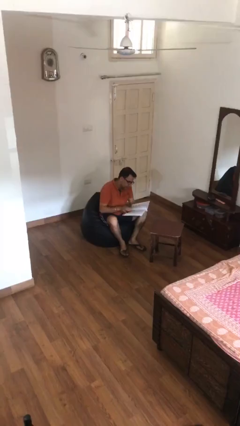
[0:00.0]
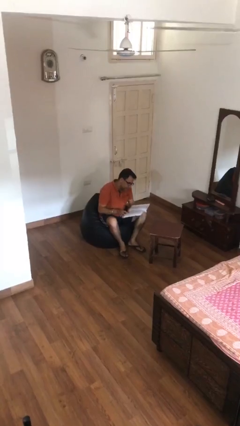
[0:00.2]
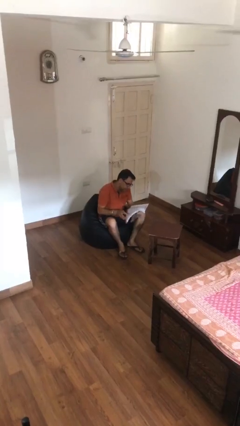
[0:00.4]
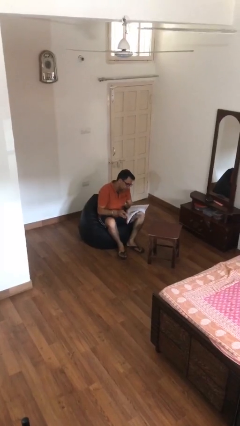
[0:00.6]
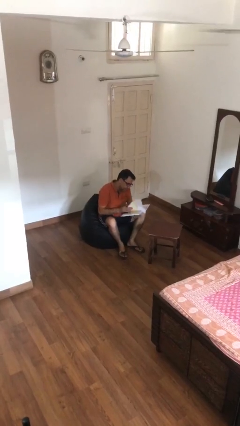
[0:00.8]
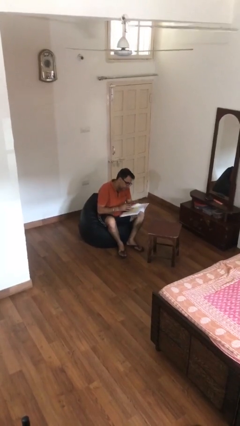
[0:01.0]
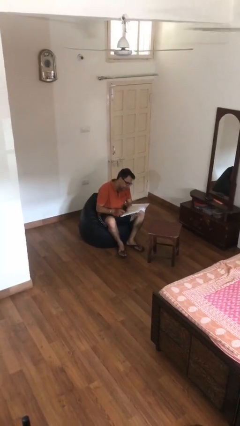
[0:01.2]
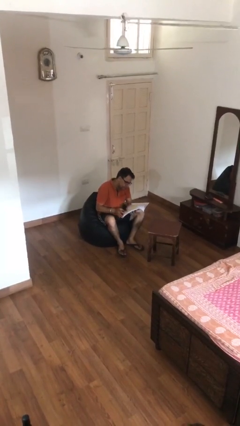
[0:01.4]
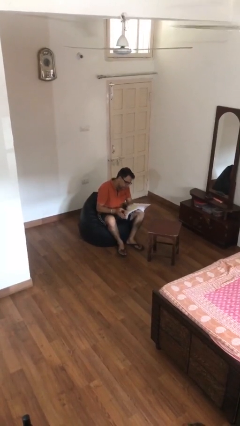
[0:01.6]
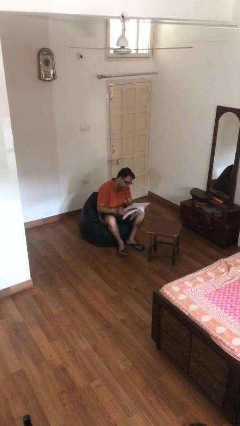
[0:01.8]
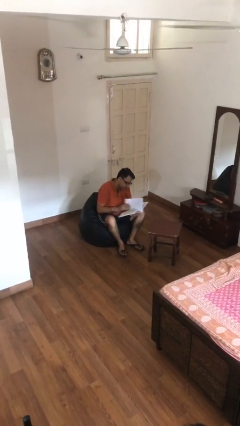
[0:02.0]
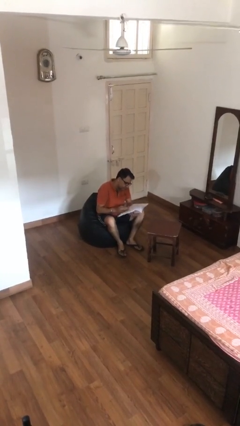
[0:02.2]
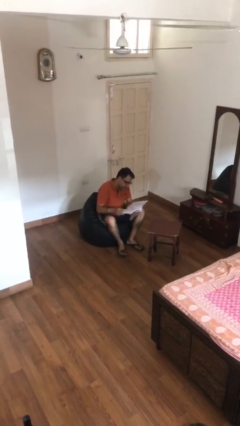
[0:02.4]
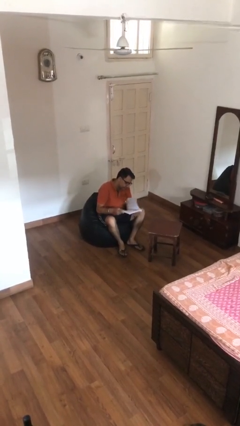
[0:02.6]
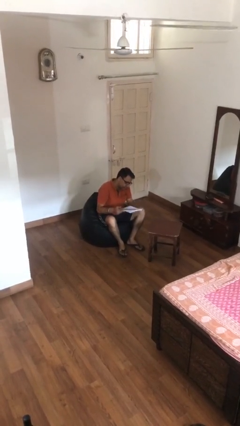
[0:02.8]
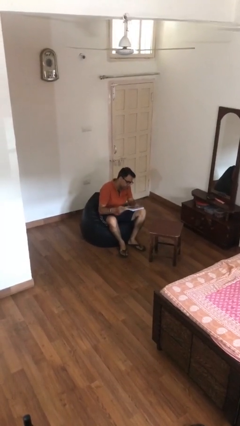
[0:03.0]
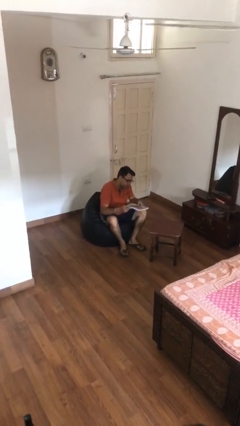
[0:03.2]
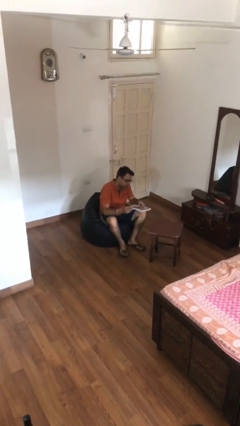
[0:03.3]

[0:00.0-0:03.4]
person reads document

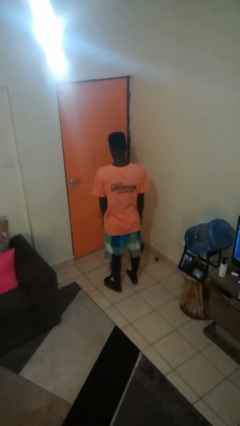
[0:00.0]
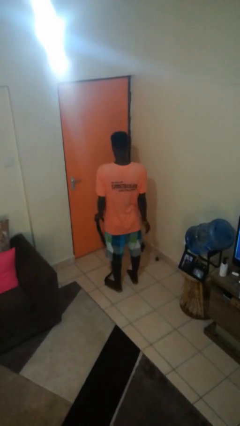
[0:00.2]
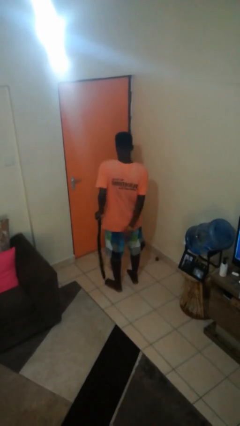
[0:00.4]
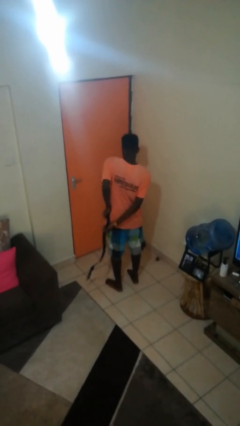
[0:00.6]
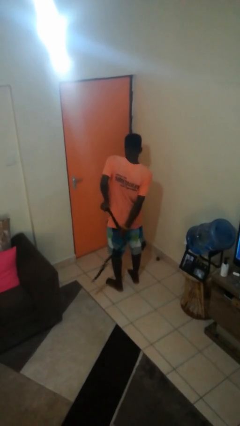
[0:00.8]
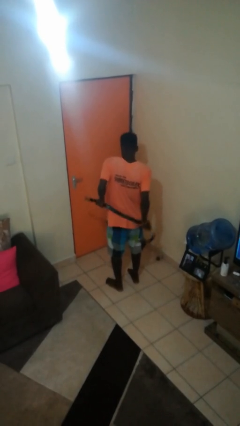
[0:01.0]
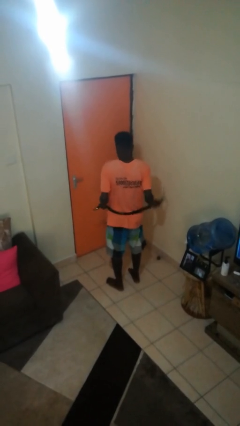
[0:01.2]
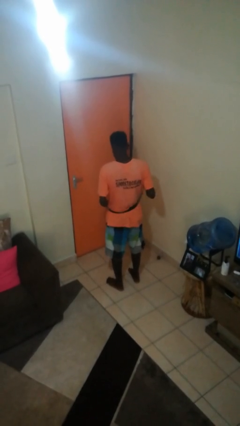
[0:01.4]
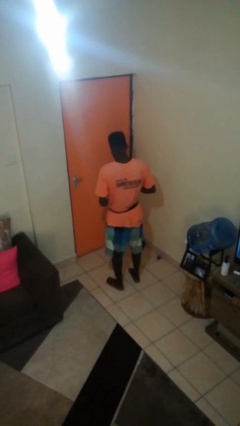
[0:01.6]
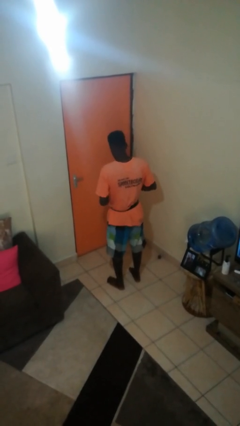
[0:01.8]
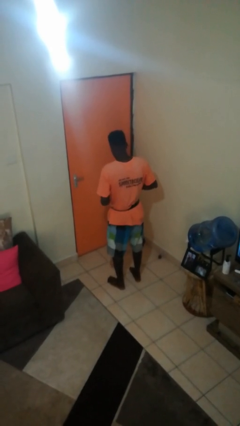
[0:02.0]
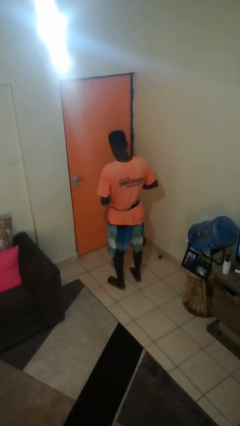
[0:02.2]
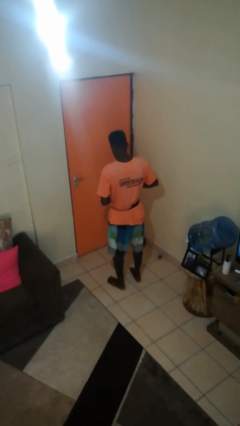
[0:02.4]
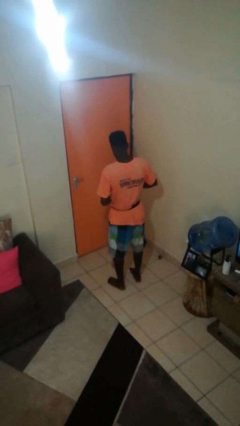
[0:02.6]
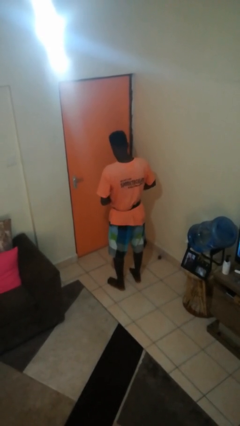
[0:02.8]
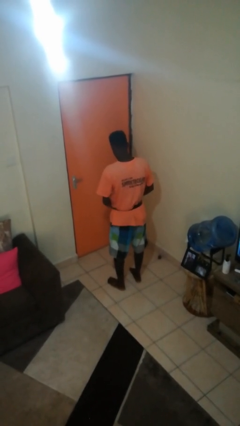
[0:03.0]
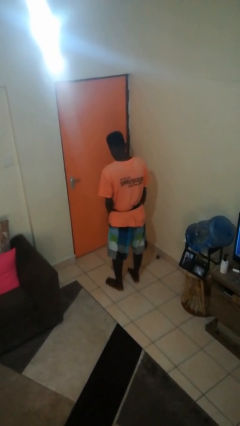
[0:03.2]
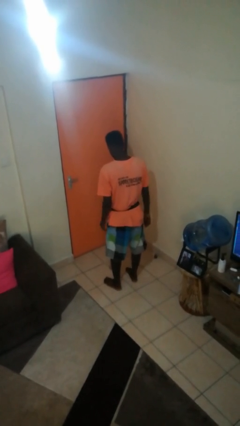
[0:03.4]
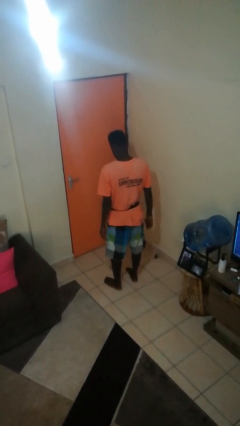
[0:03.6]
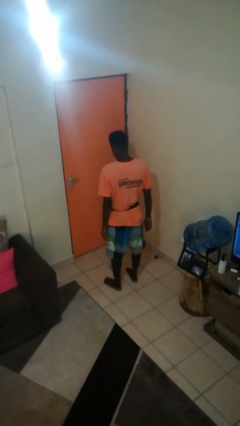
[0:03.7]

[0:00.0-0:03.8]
person puts on belt

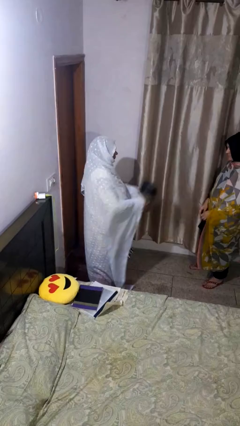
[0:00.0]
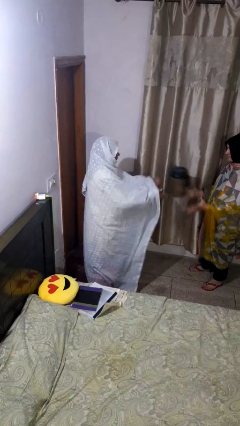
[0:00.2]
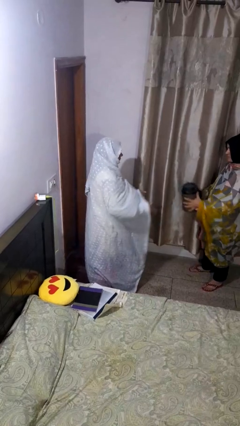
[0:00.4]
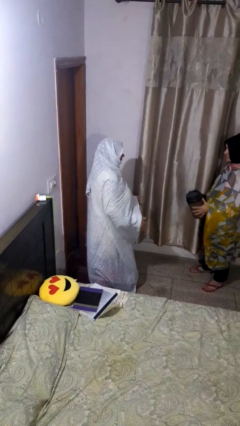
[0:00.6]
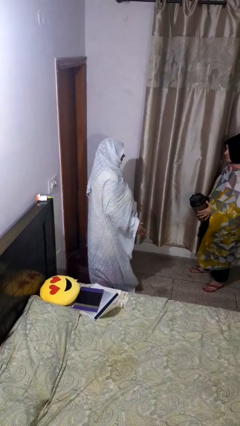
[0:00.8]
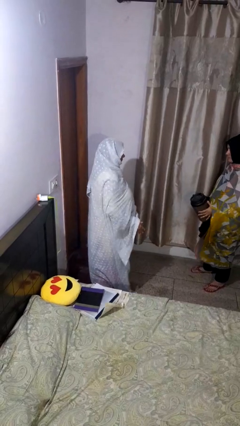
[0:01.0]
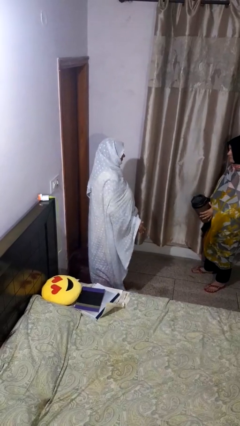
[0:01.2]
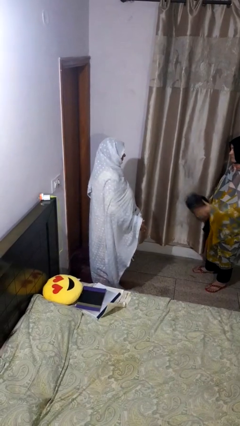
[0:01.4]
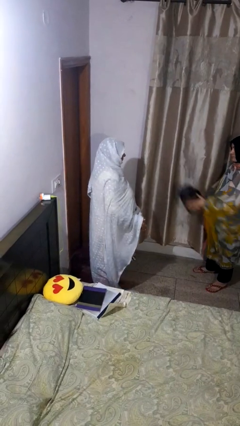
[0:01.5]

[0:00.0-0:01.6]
person throws object to person

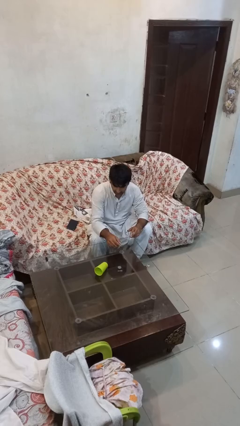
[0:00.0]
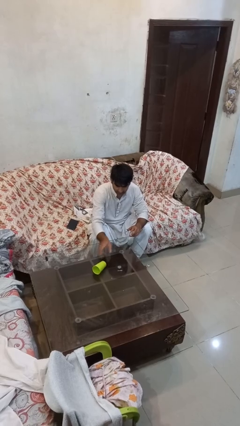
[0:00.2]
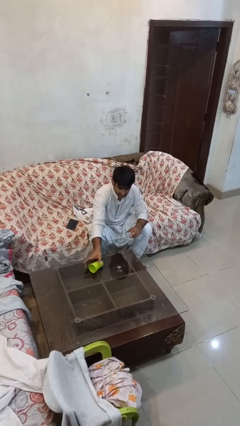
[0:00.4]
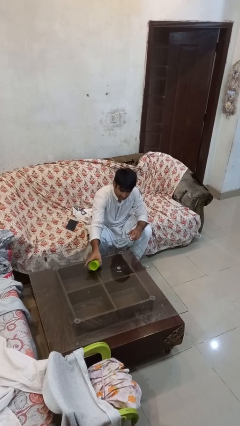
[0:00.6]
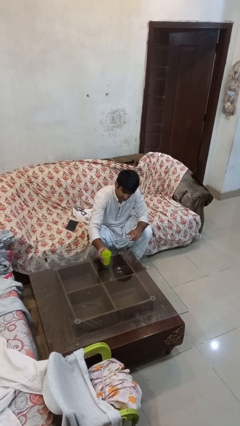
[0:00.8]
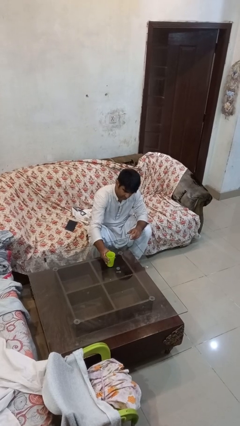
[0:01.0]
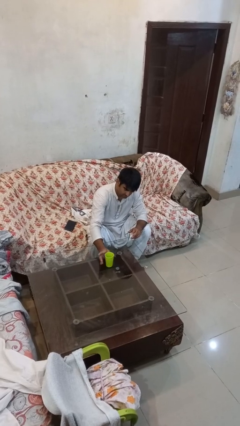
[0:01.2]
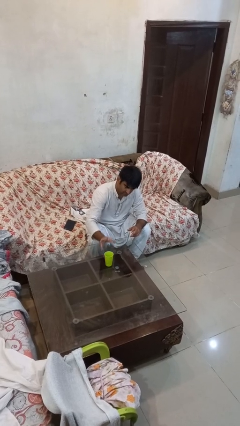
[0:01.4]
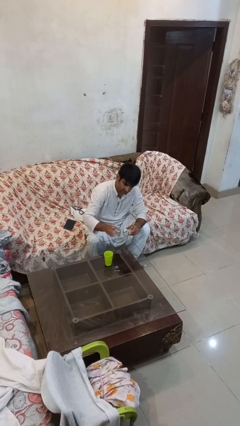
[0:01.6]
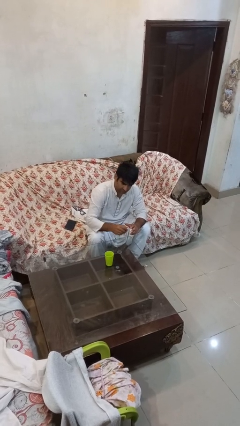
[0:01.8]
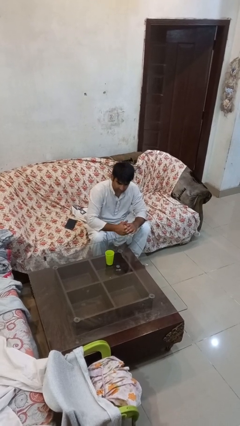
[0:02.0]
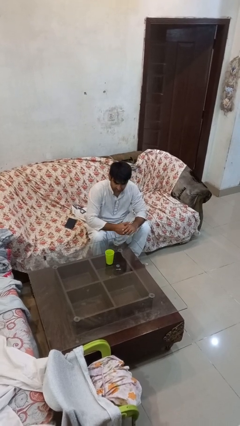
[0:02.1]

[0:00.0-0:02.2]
person sets upright glass

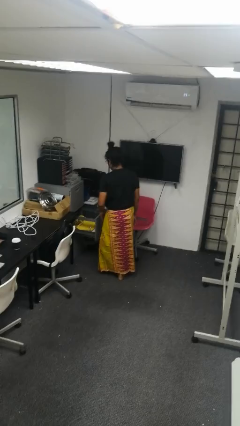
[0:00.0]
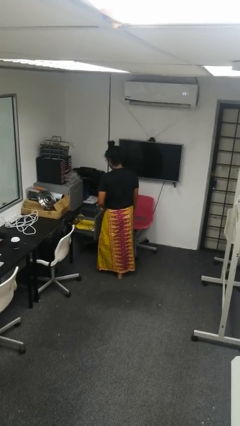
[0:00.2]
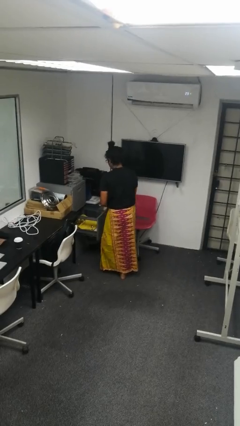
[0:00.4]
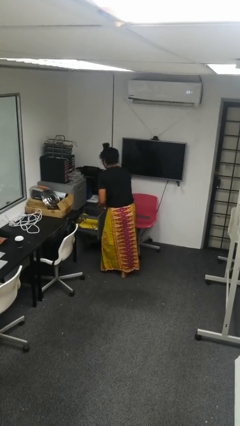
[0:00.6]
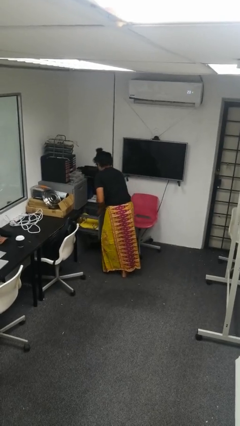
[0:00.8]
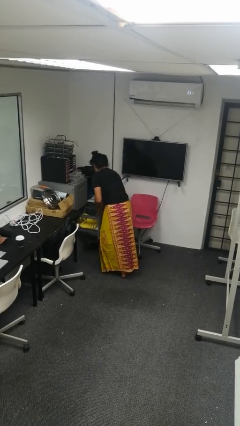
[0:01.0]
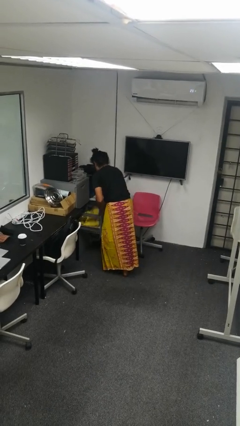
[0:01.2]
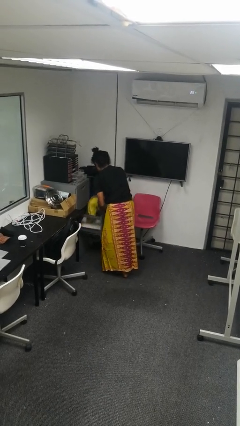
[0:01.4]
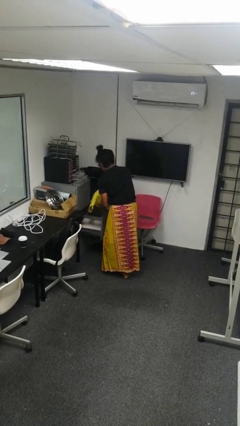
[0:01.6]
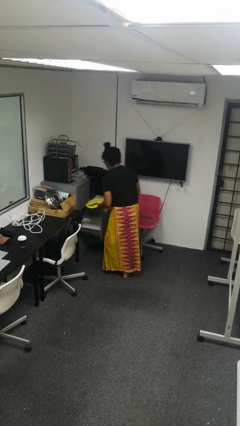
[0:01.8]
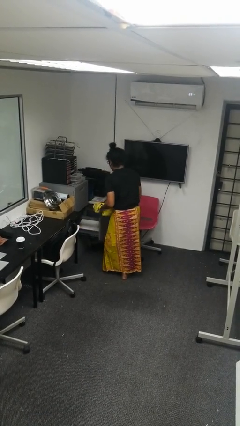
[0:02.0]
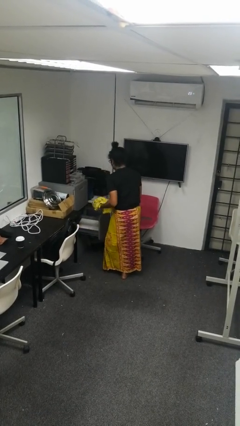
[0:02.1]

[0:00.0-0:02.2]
person takes clothes from dresser

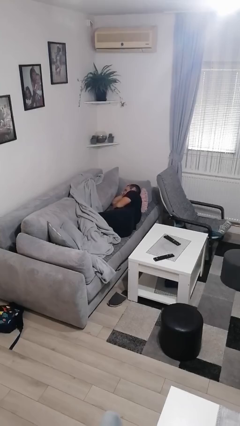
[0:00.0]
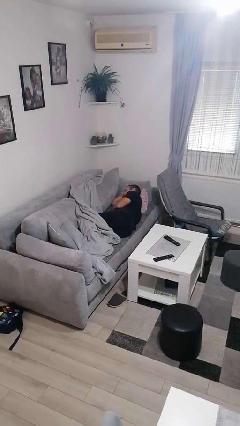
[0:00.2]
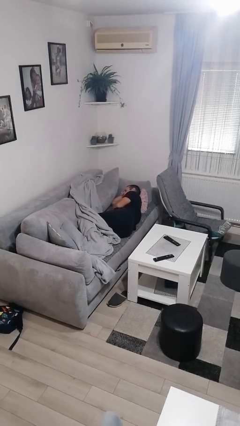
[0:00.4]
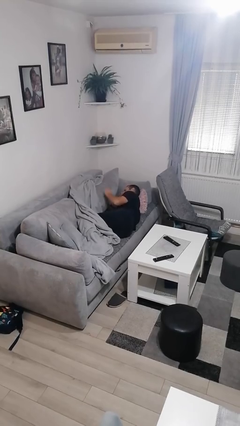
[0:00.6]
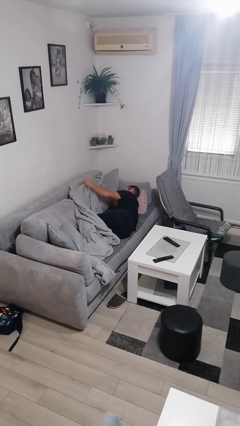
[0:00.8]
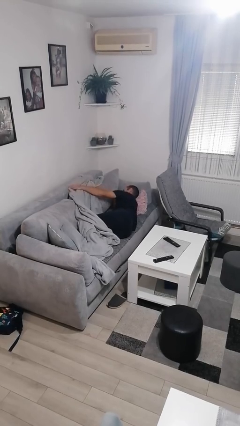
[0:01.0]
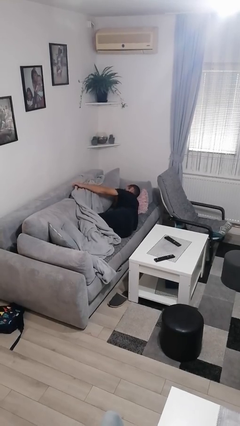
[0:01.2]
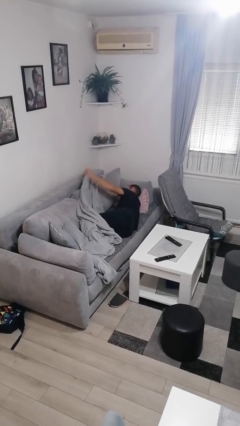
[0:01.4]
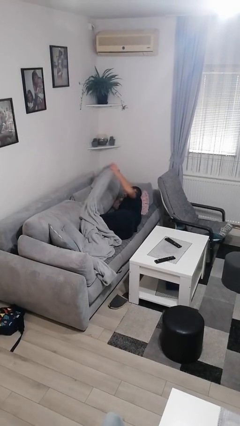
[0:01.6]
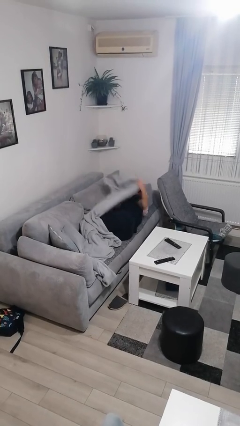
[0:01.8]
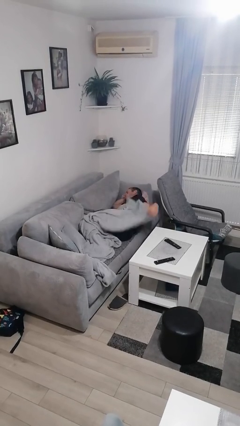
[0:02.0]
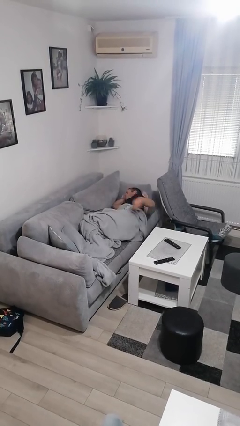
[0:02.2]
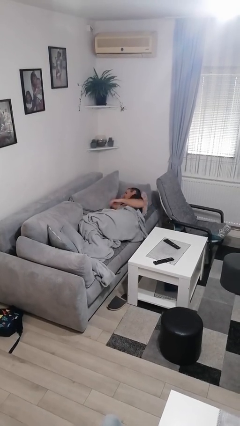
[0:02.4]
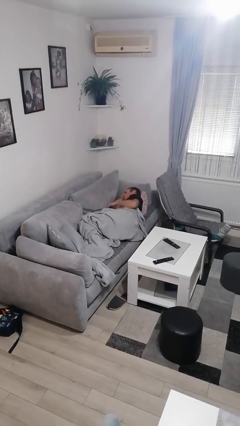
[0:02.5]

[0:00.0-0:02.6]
person covers with blanket

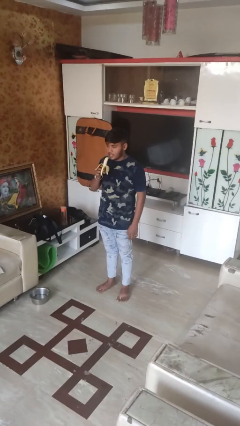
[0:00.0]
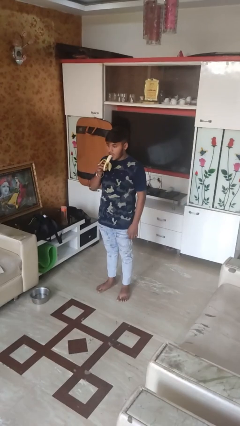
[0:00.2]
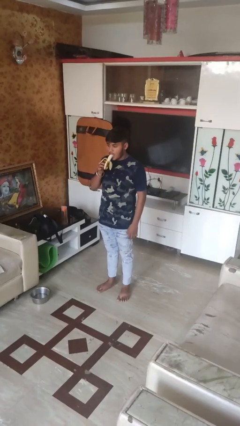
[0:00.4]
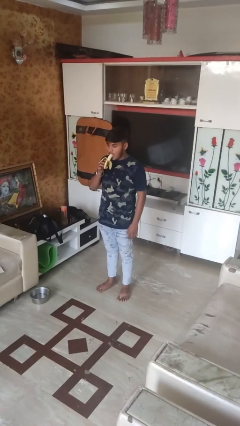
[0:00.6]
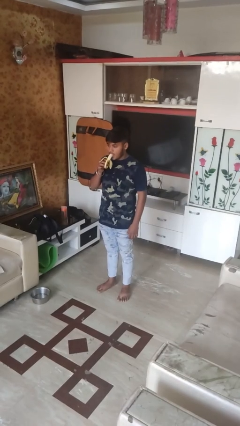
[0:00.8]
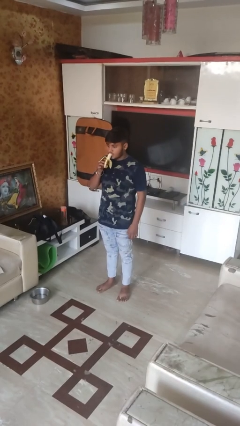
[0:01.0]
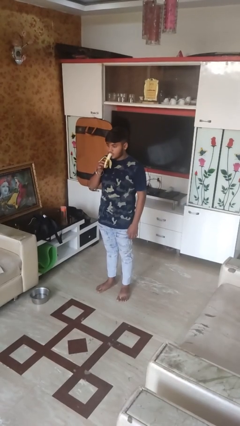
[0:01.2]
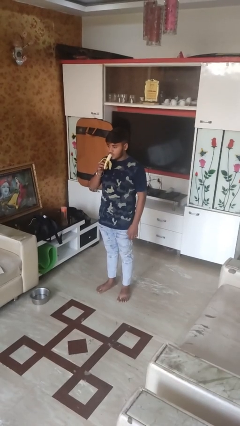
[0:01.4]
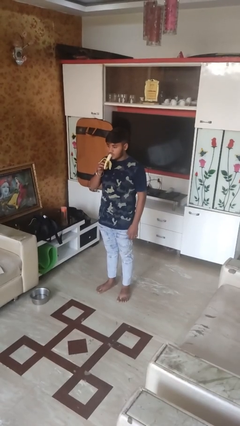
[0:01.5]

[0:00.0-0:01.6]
person eats banana
